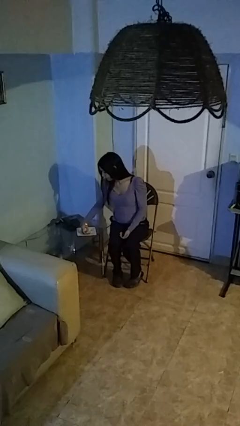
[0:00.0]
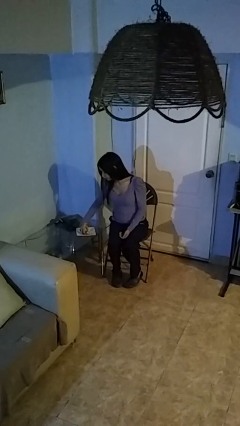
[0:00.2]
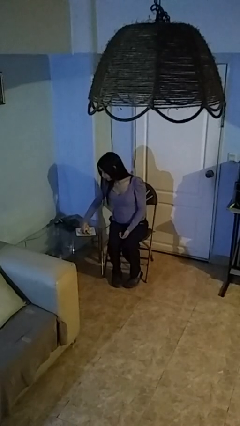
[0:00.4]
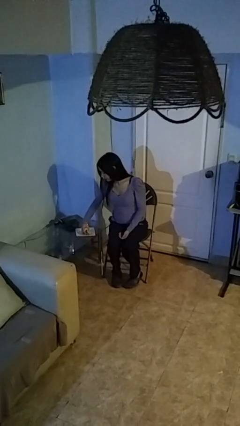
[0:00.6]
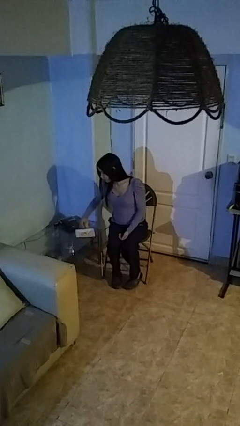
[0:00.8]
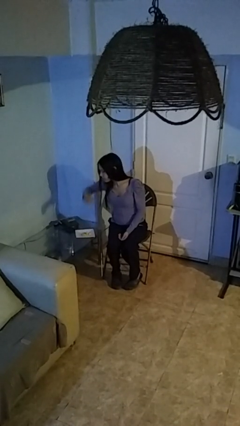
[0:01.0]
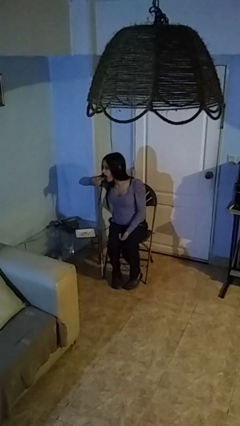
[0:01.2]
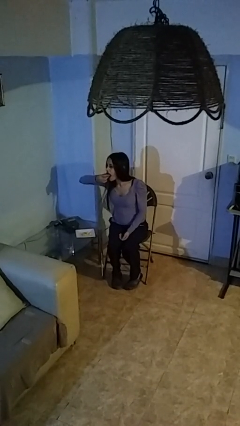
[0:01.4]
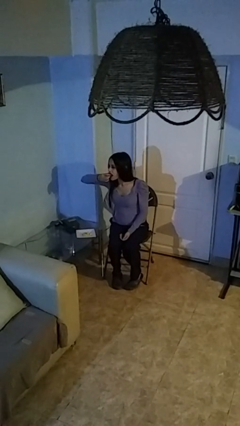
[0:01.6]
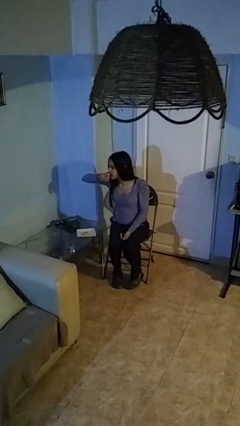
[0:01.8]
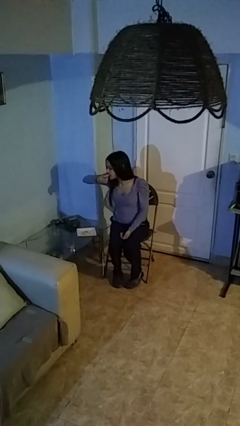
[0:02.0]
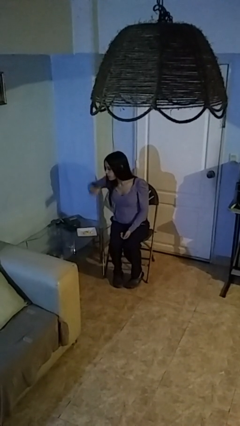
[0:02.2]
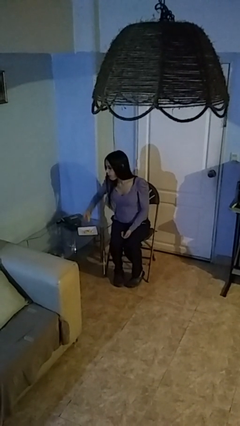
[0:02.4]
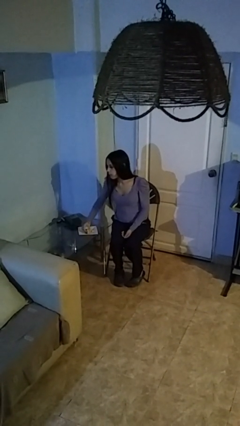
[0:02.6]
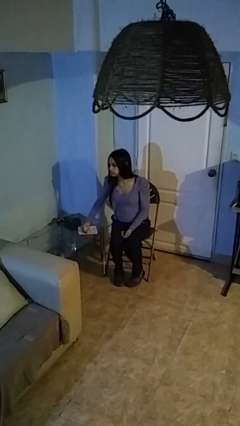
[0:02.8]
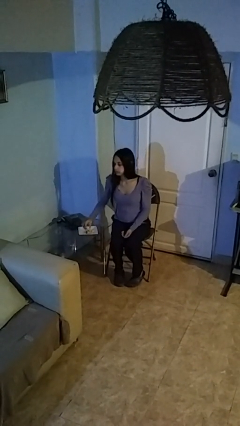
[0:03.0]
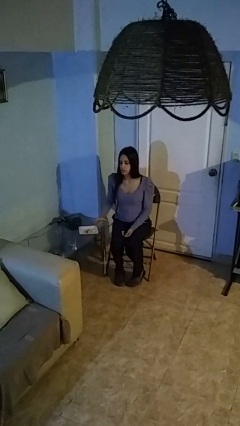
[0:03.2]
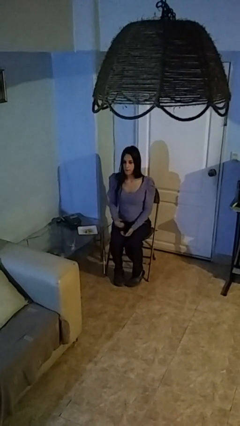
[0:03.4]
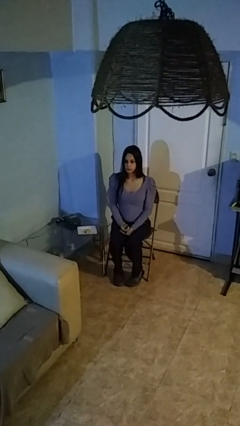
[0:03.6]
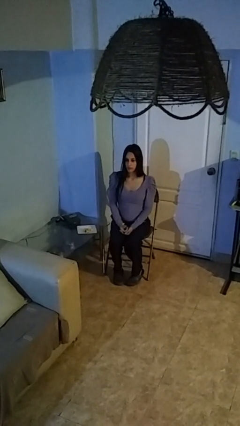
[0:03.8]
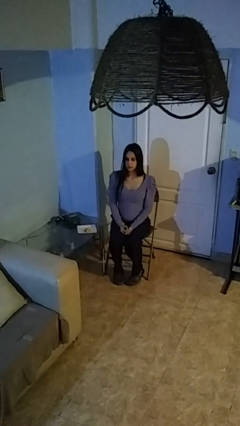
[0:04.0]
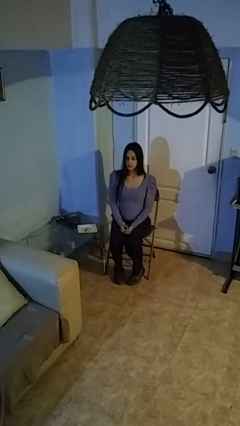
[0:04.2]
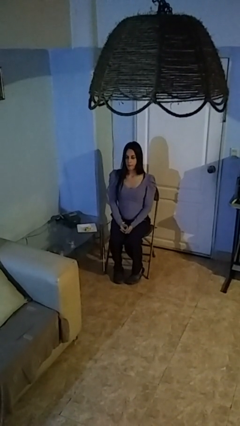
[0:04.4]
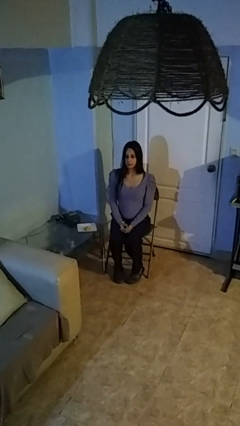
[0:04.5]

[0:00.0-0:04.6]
person eats with hands

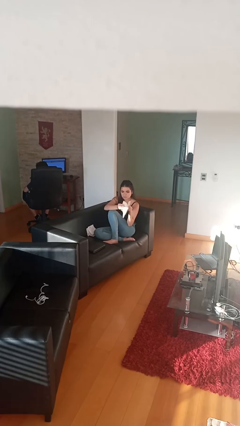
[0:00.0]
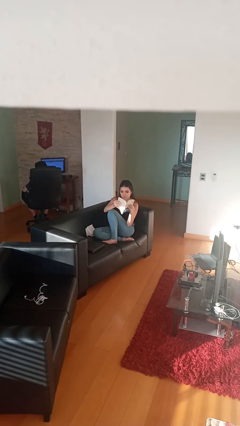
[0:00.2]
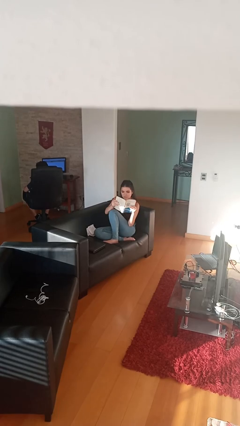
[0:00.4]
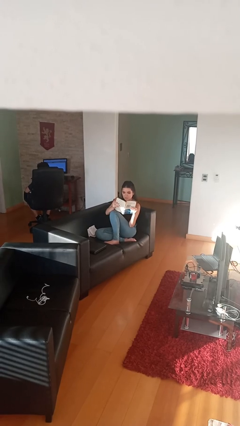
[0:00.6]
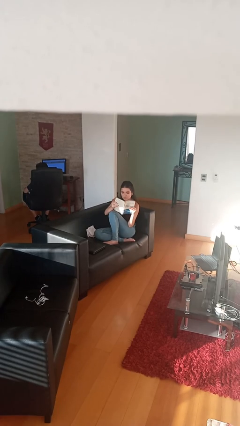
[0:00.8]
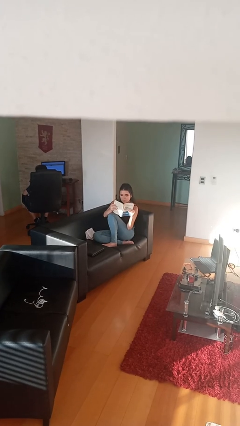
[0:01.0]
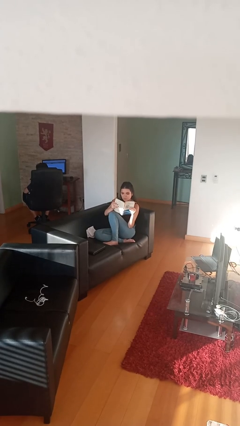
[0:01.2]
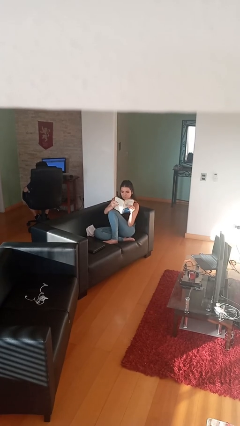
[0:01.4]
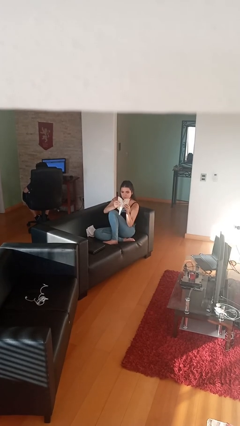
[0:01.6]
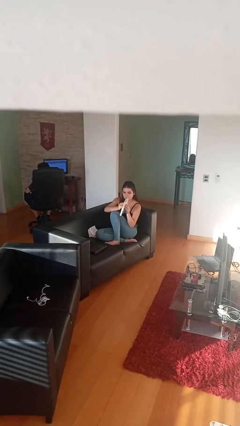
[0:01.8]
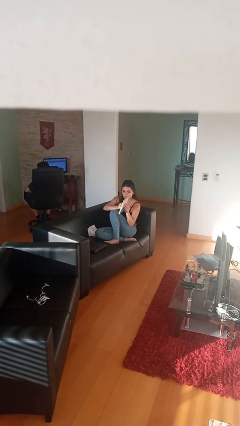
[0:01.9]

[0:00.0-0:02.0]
person reads document

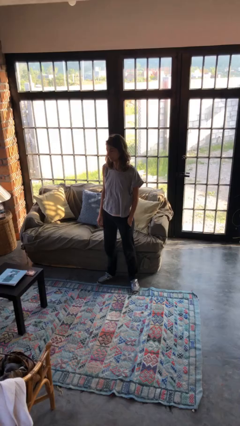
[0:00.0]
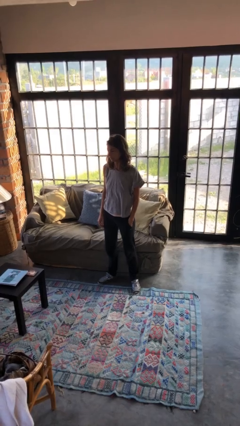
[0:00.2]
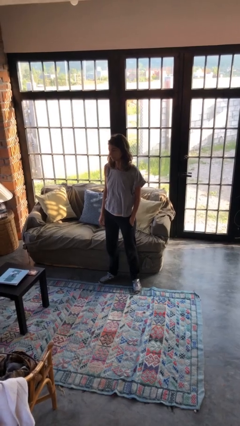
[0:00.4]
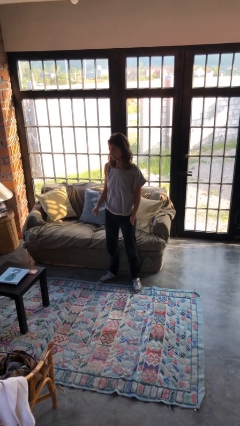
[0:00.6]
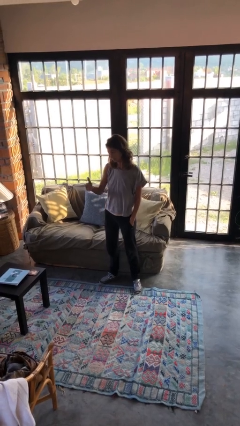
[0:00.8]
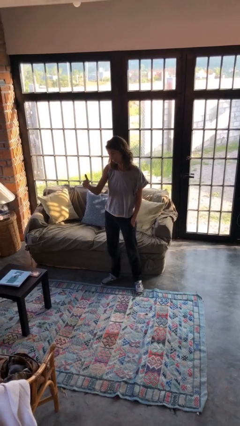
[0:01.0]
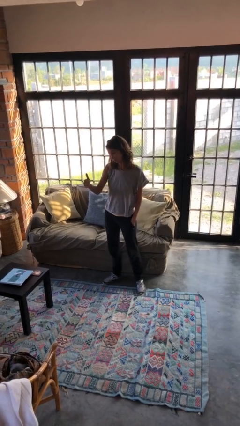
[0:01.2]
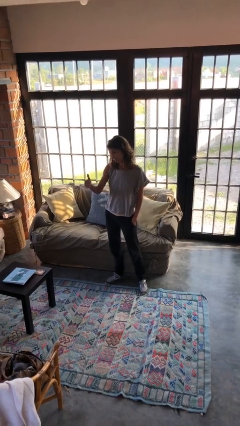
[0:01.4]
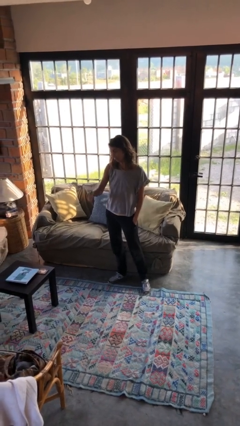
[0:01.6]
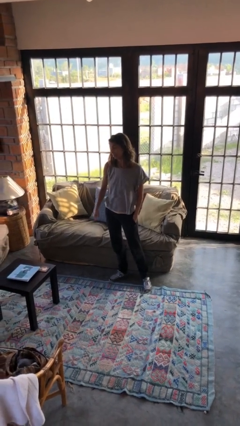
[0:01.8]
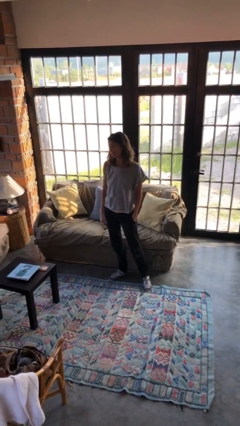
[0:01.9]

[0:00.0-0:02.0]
person gestures thumbs up

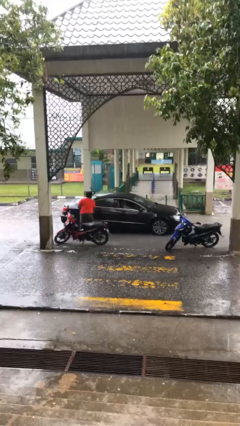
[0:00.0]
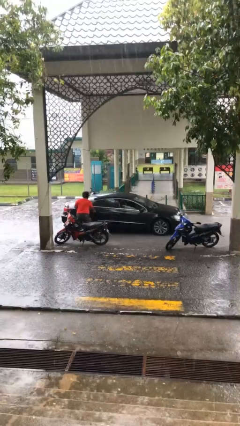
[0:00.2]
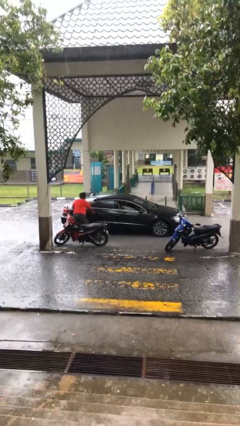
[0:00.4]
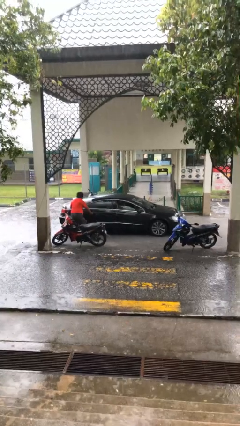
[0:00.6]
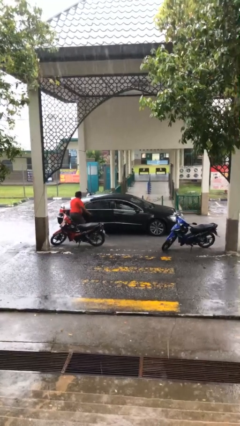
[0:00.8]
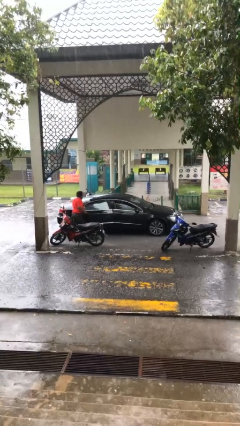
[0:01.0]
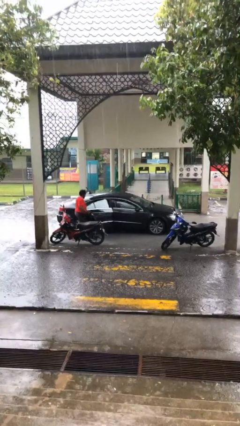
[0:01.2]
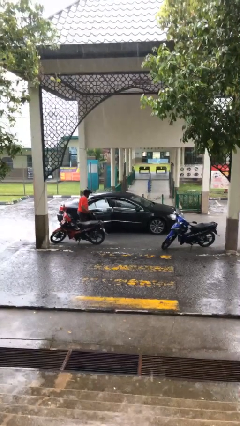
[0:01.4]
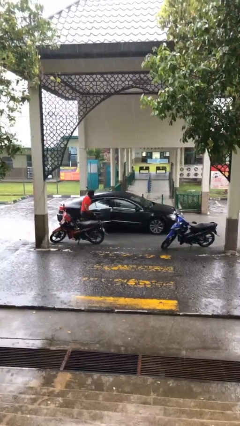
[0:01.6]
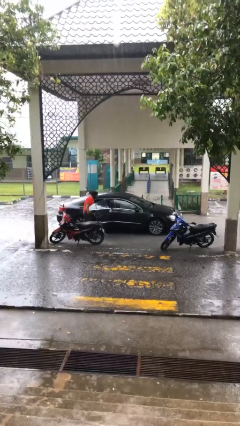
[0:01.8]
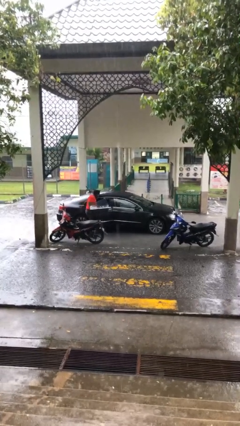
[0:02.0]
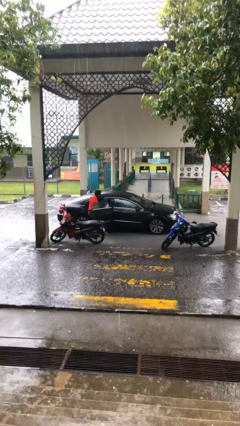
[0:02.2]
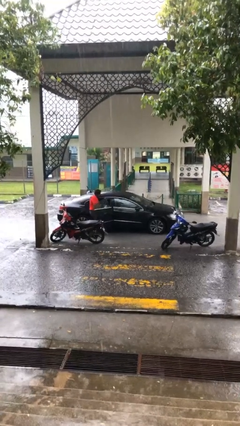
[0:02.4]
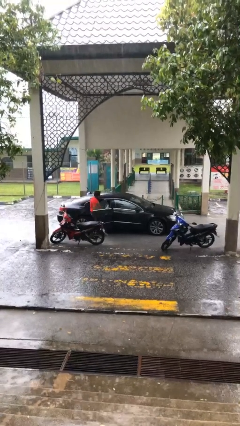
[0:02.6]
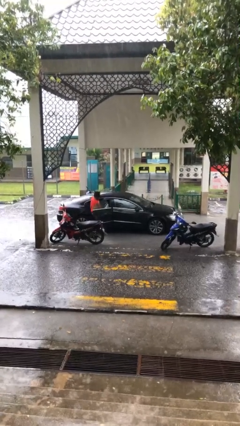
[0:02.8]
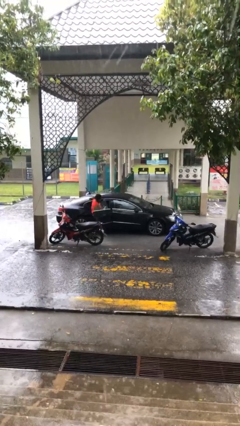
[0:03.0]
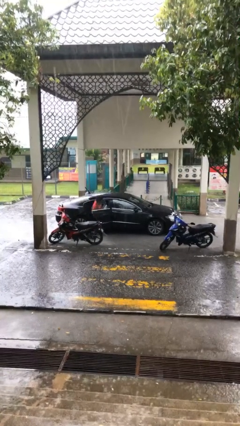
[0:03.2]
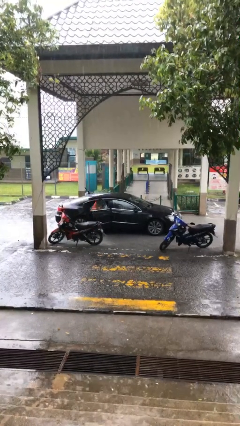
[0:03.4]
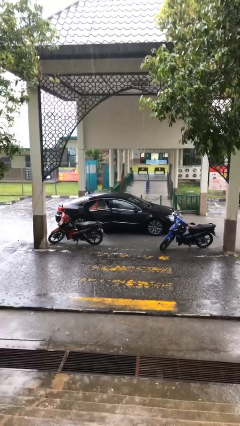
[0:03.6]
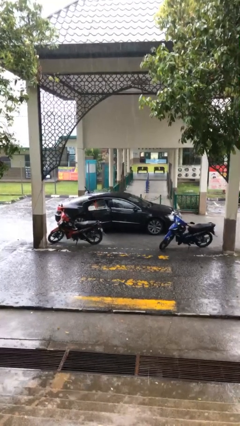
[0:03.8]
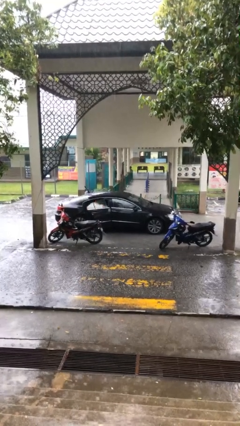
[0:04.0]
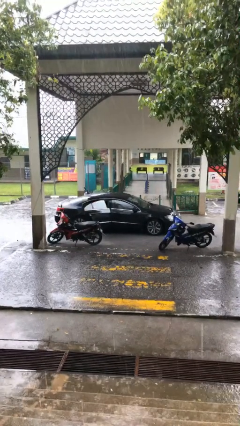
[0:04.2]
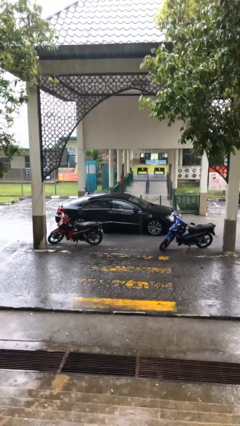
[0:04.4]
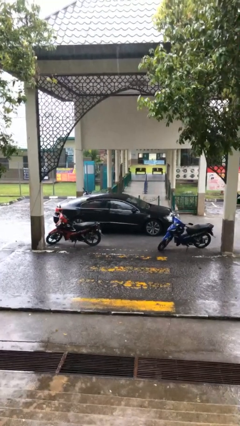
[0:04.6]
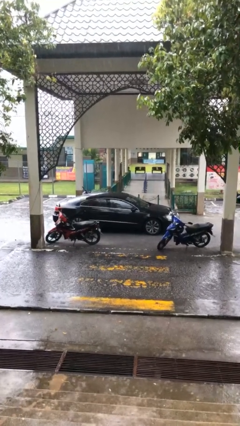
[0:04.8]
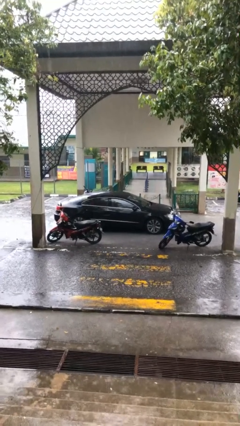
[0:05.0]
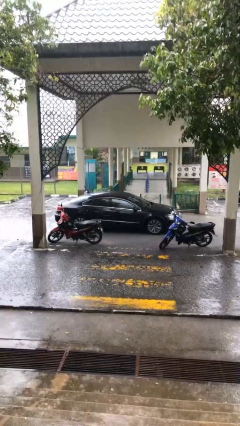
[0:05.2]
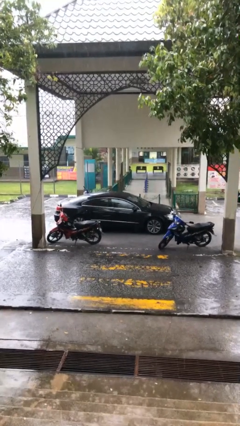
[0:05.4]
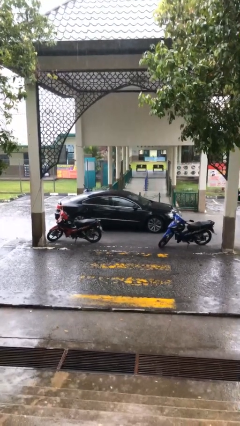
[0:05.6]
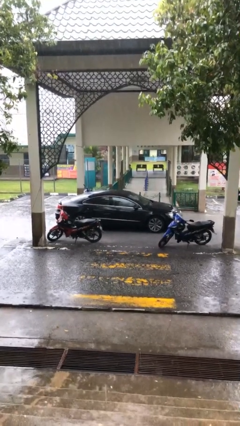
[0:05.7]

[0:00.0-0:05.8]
car picks up person

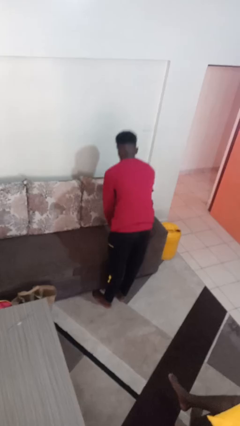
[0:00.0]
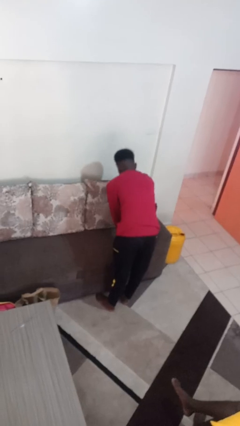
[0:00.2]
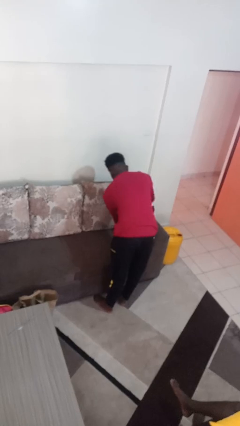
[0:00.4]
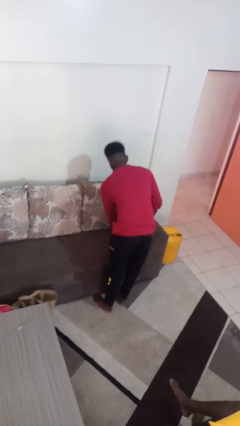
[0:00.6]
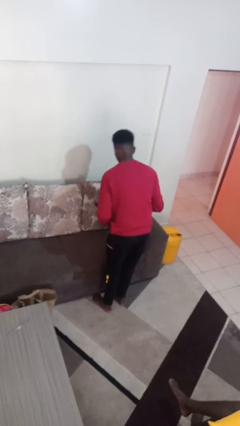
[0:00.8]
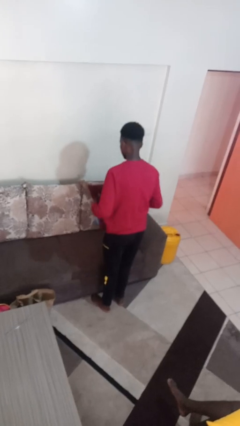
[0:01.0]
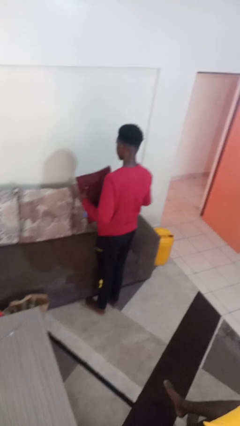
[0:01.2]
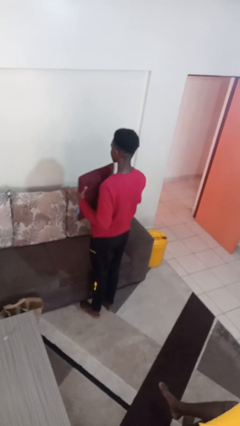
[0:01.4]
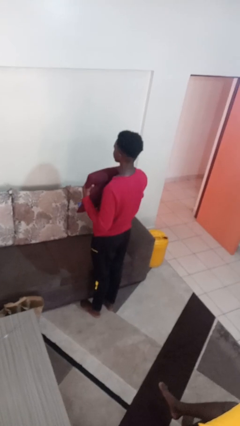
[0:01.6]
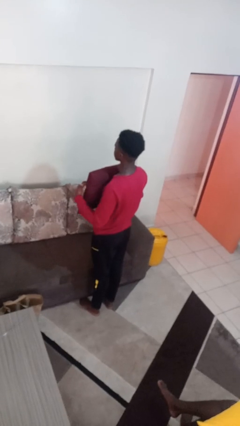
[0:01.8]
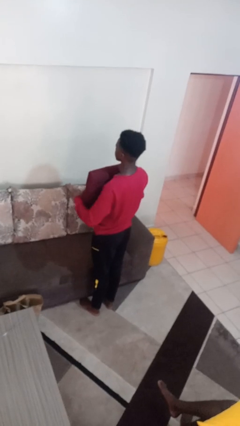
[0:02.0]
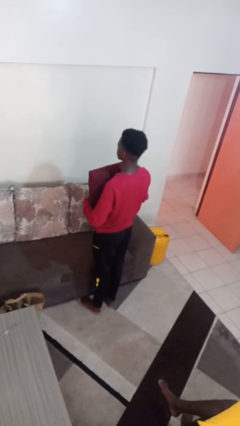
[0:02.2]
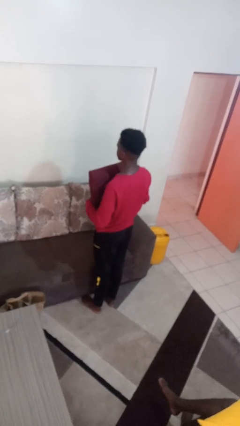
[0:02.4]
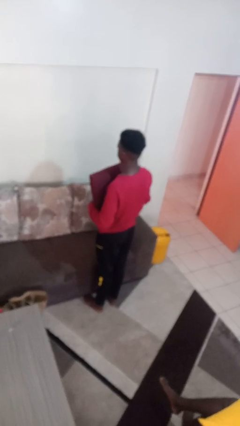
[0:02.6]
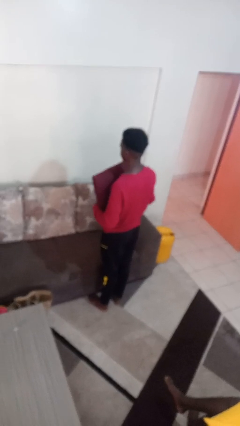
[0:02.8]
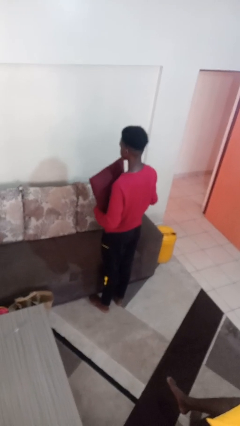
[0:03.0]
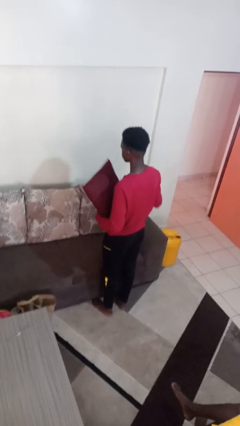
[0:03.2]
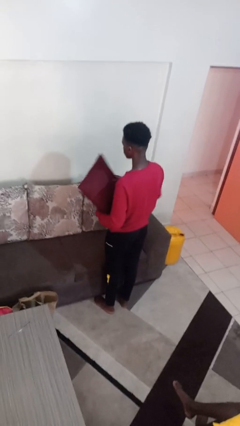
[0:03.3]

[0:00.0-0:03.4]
person picks up object from couch
